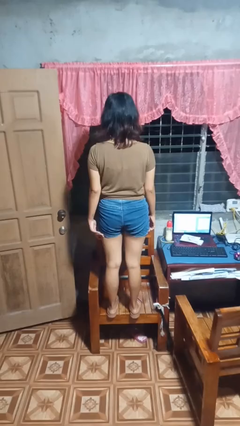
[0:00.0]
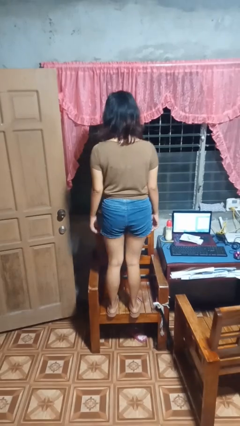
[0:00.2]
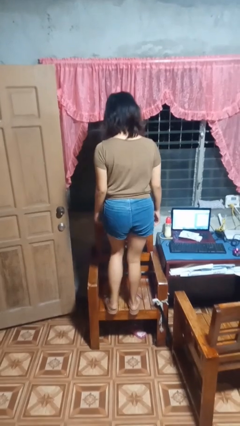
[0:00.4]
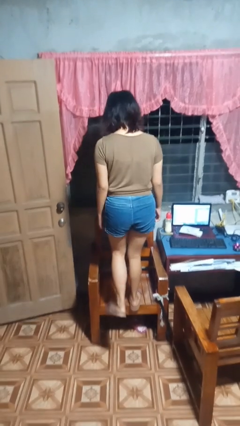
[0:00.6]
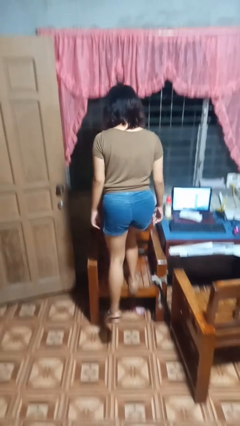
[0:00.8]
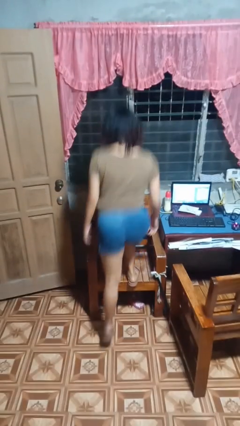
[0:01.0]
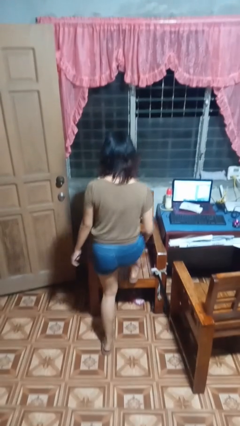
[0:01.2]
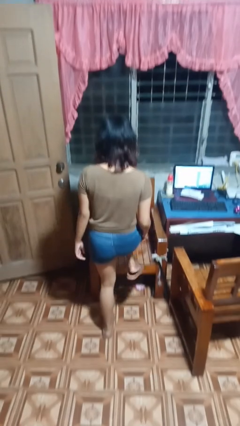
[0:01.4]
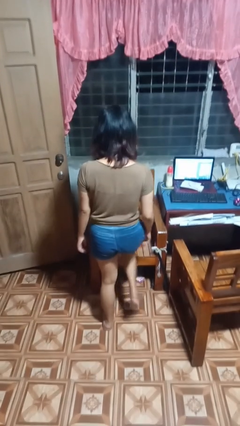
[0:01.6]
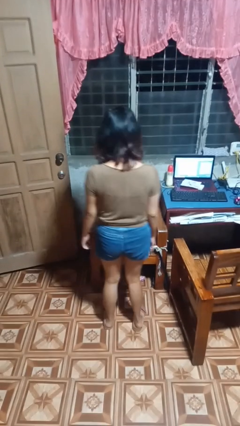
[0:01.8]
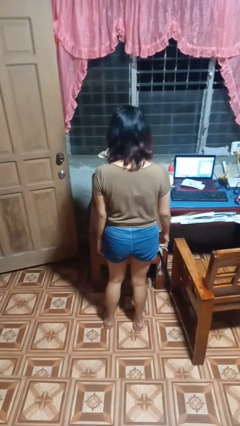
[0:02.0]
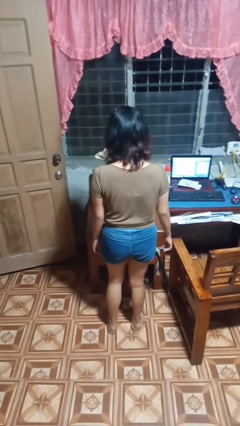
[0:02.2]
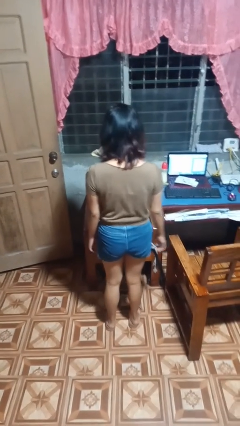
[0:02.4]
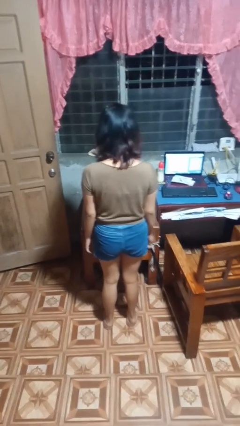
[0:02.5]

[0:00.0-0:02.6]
person climbs off chair

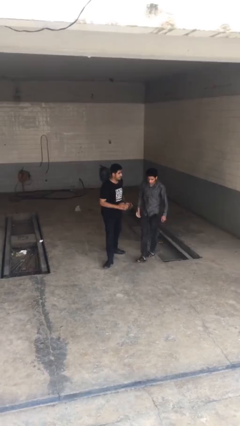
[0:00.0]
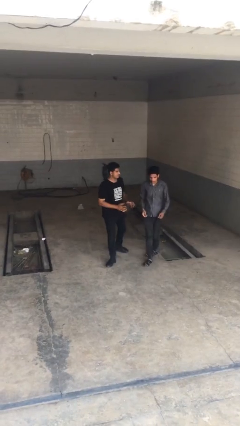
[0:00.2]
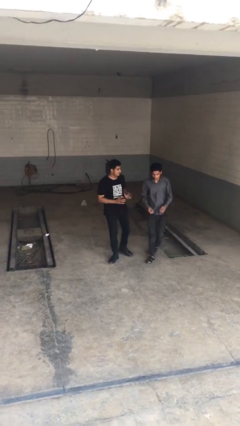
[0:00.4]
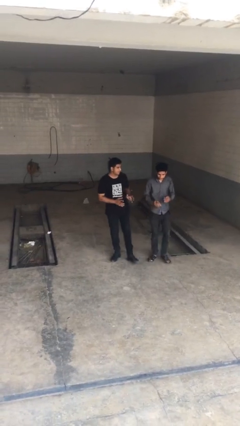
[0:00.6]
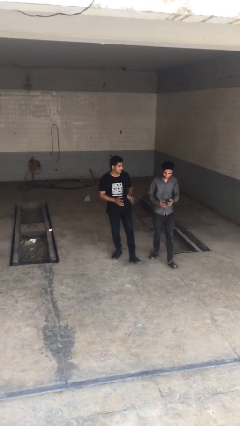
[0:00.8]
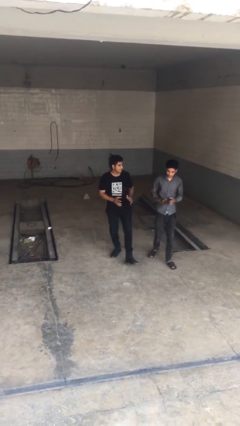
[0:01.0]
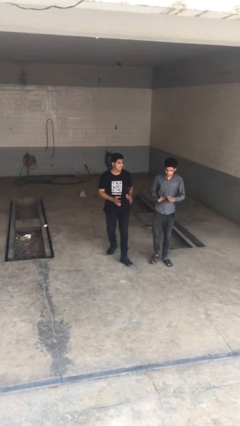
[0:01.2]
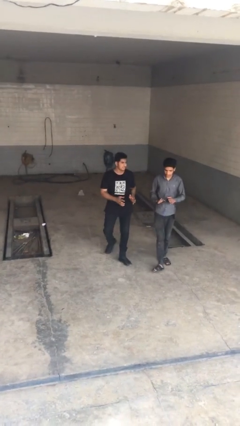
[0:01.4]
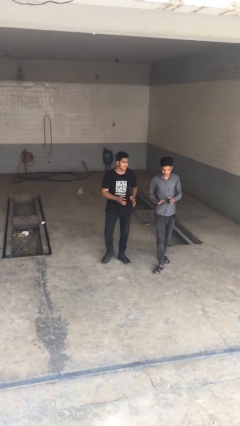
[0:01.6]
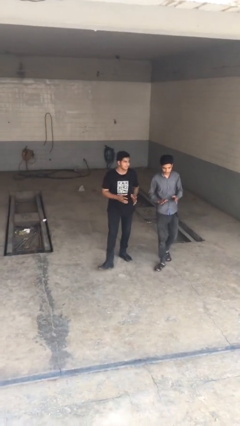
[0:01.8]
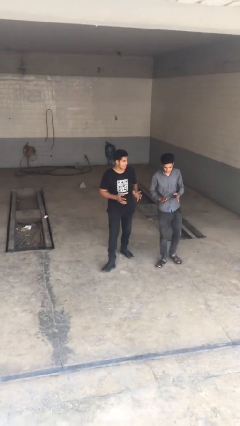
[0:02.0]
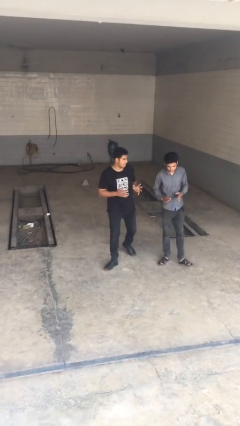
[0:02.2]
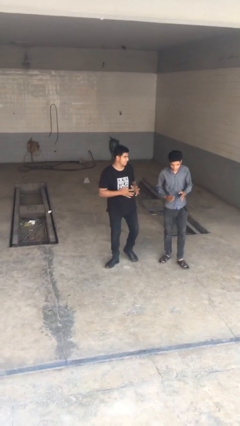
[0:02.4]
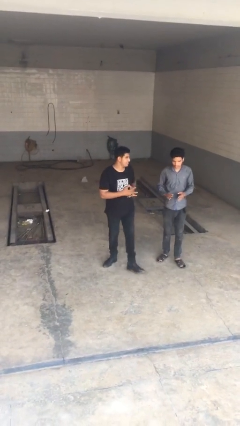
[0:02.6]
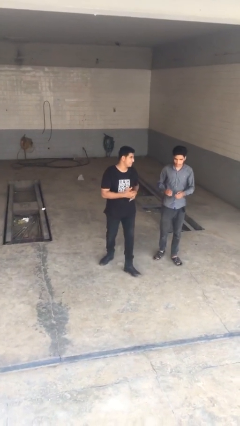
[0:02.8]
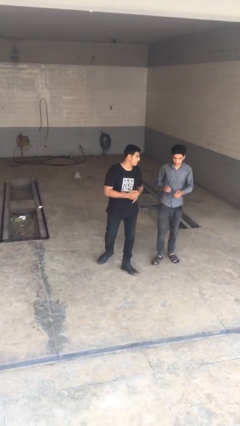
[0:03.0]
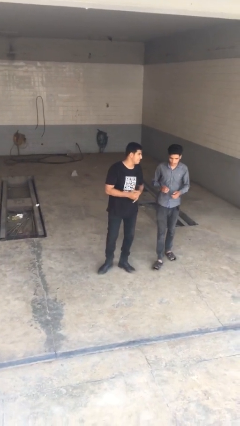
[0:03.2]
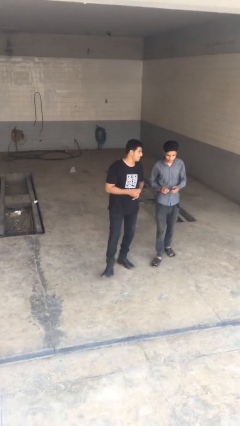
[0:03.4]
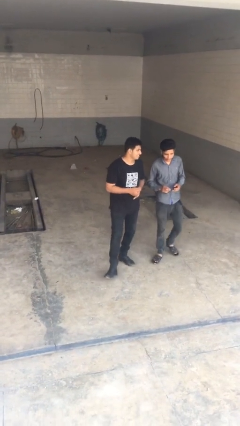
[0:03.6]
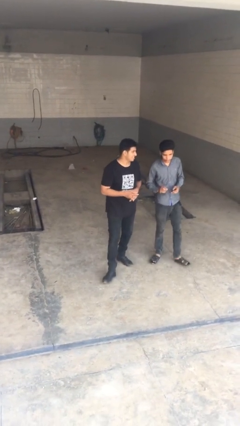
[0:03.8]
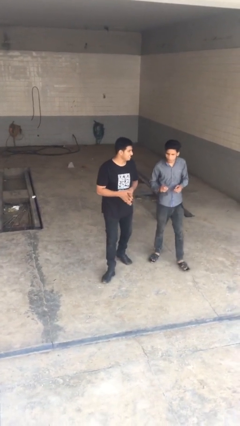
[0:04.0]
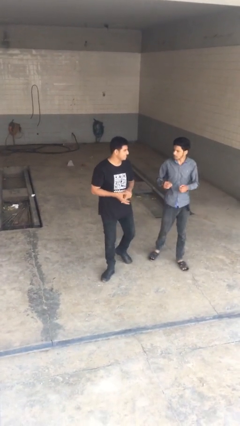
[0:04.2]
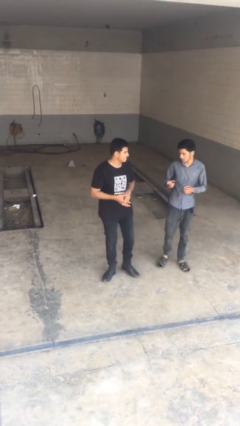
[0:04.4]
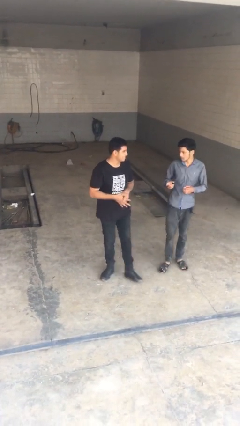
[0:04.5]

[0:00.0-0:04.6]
person talks to person

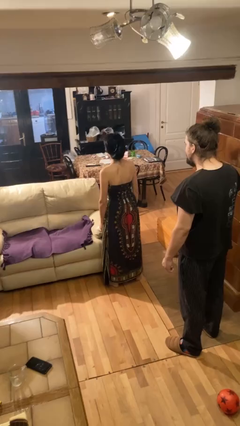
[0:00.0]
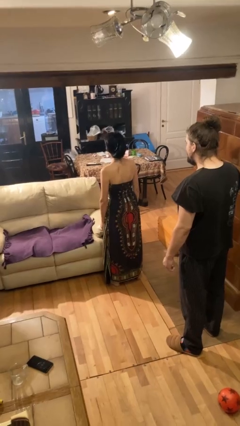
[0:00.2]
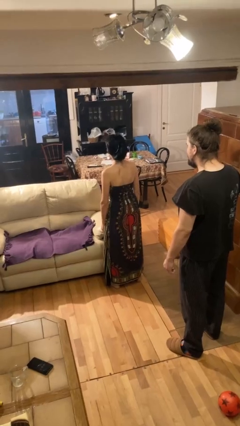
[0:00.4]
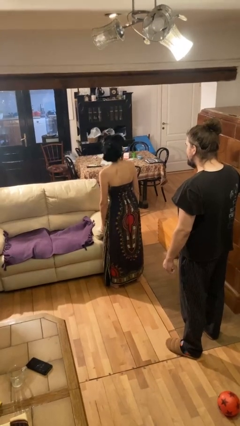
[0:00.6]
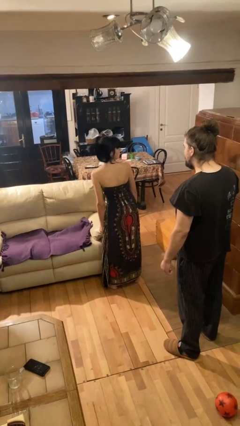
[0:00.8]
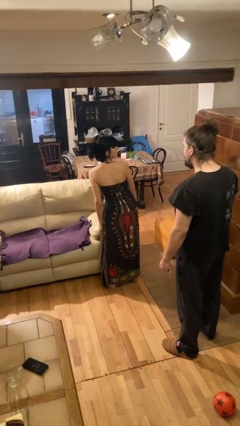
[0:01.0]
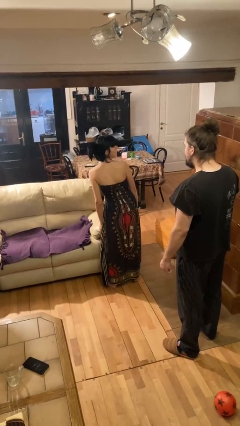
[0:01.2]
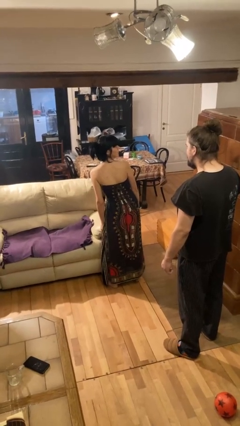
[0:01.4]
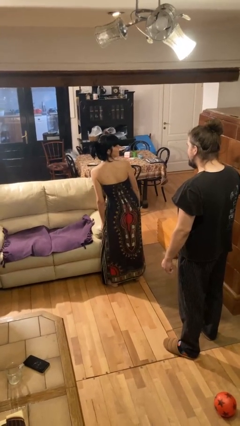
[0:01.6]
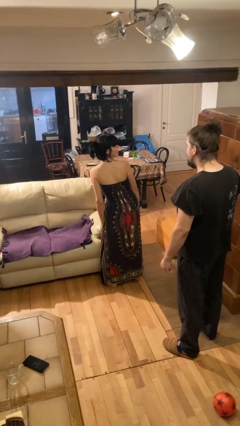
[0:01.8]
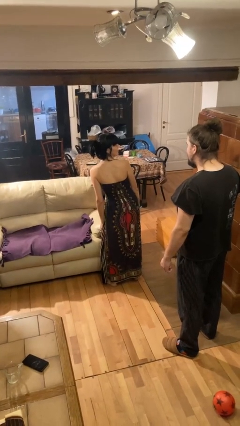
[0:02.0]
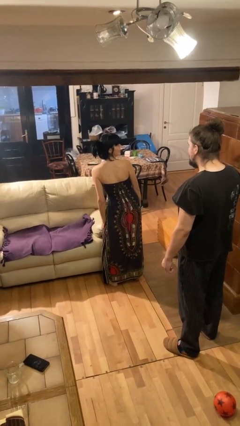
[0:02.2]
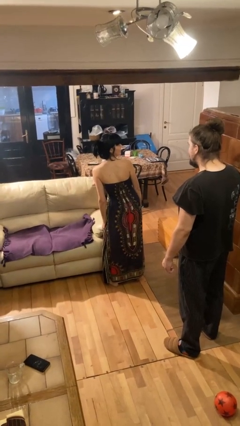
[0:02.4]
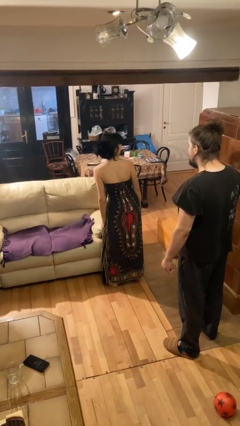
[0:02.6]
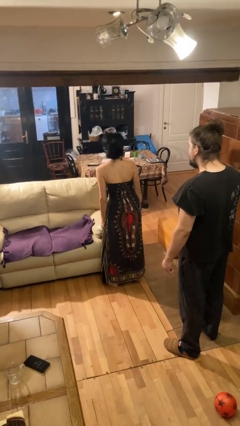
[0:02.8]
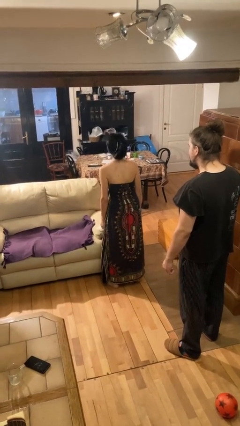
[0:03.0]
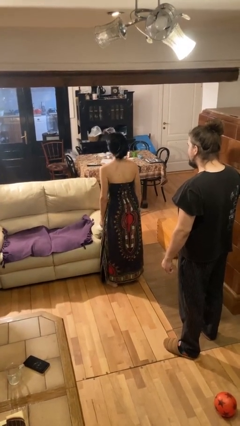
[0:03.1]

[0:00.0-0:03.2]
person looks over shoulder

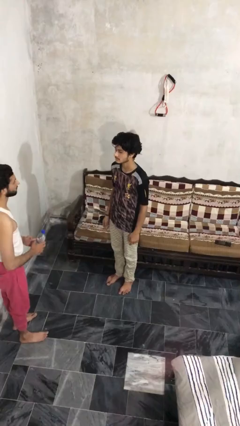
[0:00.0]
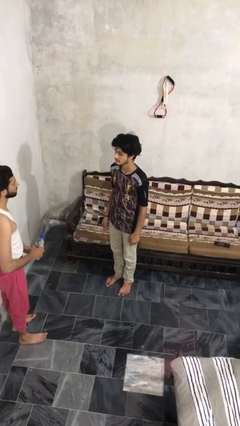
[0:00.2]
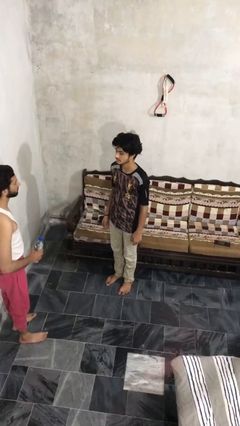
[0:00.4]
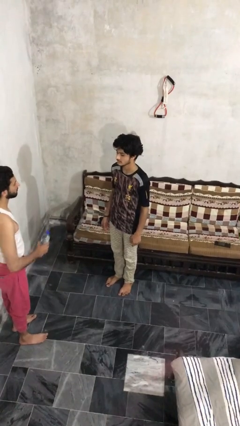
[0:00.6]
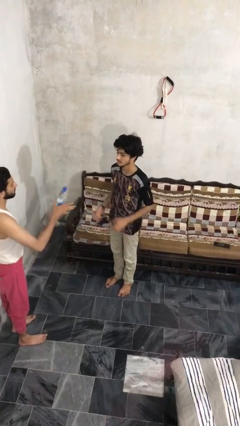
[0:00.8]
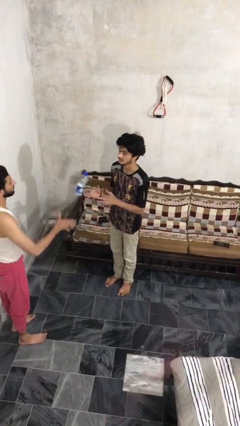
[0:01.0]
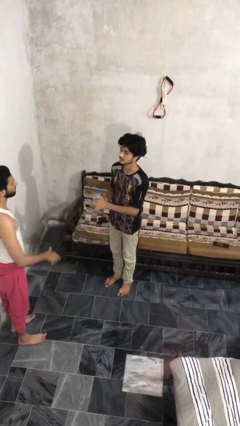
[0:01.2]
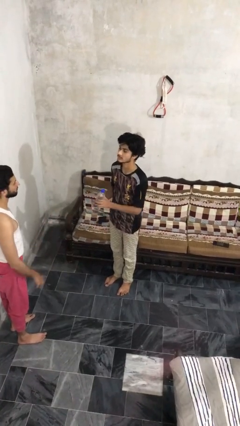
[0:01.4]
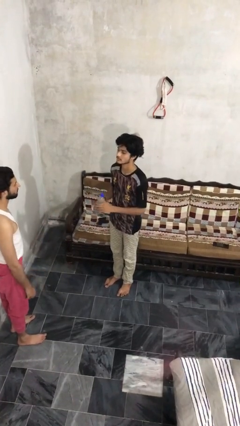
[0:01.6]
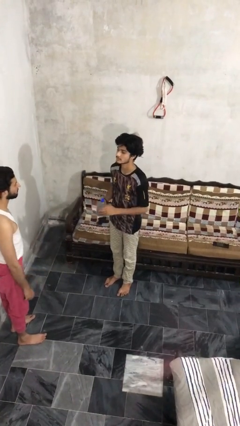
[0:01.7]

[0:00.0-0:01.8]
person catches object from person

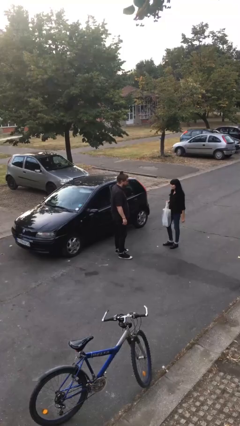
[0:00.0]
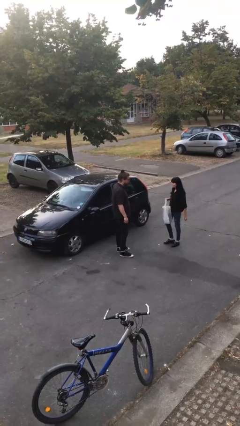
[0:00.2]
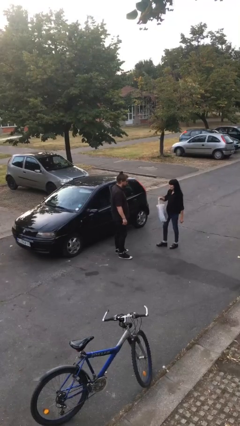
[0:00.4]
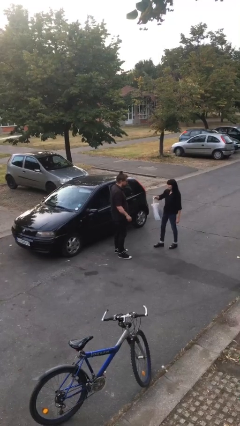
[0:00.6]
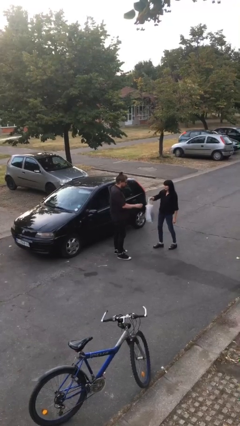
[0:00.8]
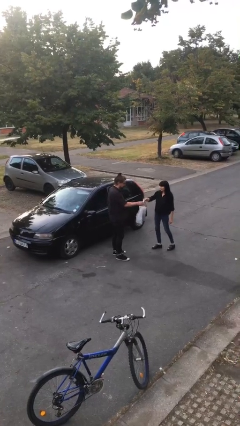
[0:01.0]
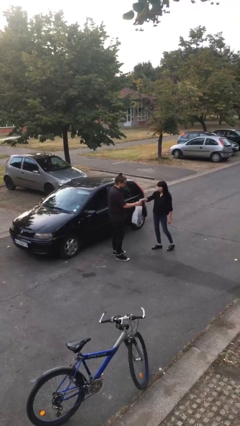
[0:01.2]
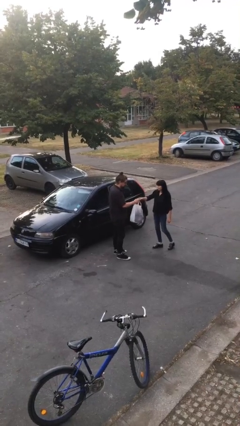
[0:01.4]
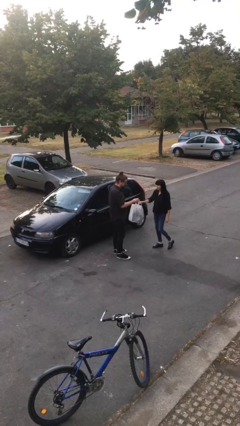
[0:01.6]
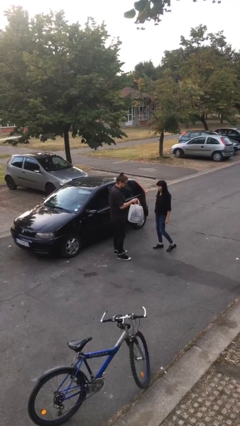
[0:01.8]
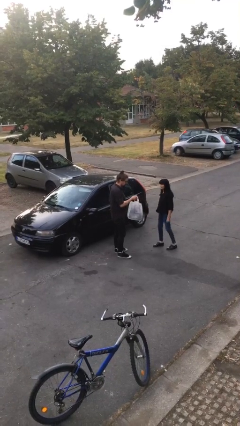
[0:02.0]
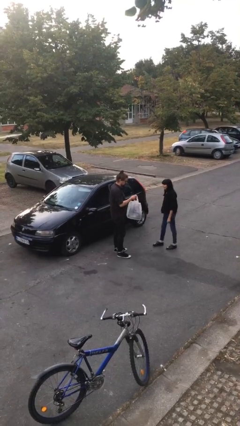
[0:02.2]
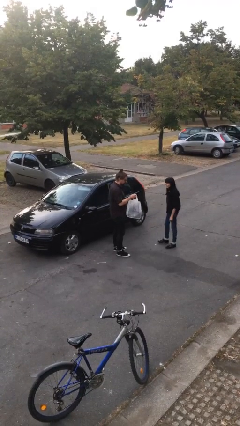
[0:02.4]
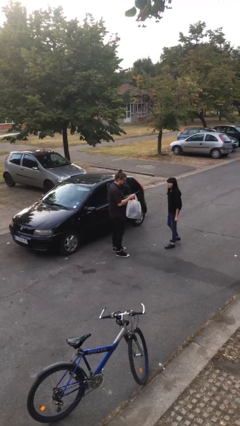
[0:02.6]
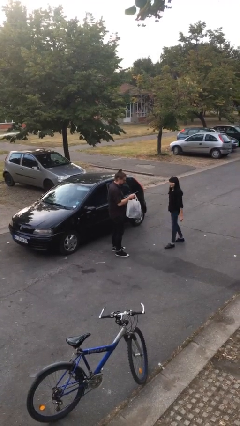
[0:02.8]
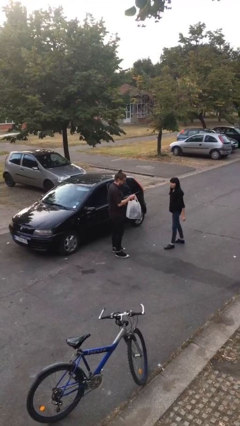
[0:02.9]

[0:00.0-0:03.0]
person transfers object to person

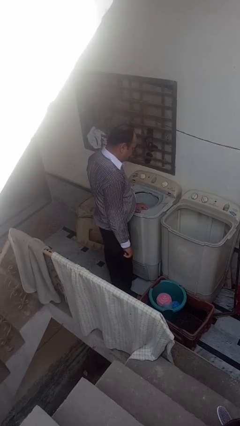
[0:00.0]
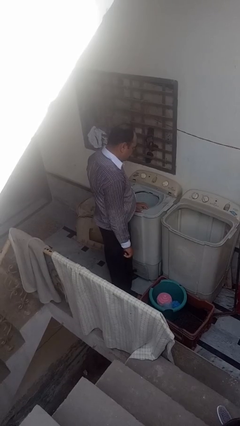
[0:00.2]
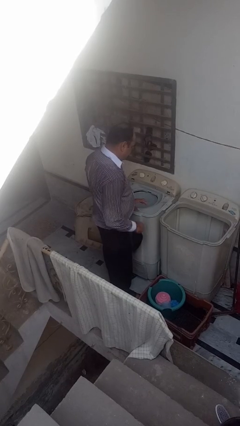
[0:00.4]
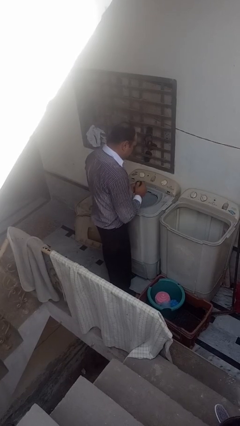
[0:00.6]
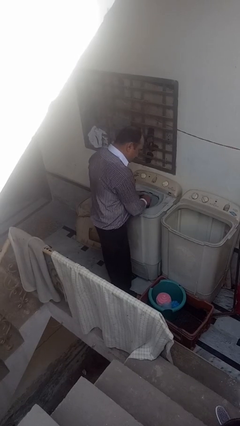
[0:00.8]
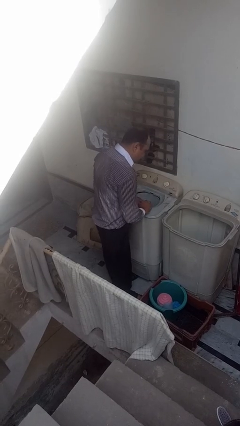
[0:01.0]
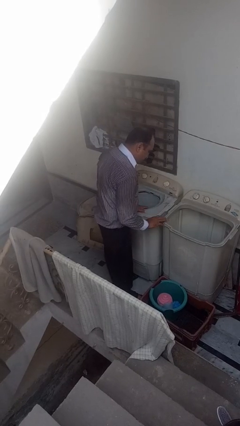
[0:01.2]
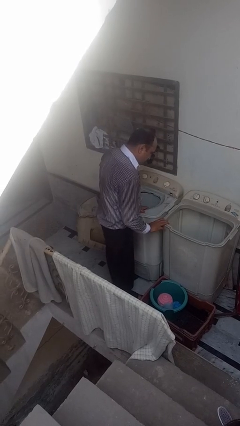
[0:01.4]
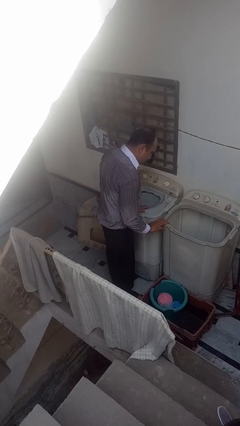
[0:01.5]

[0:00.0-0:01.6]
person loads dryer

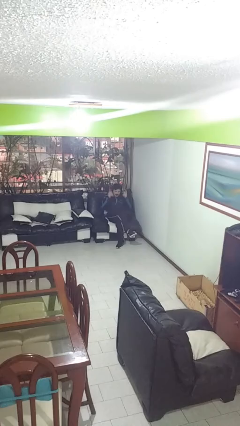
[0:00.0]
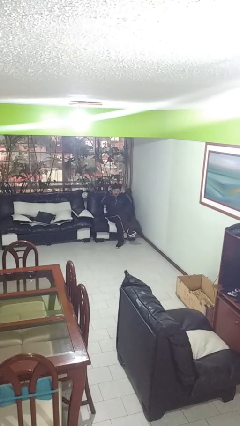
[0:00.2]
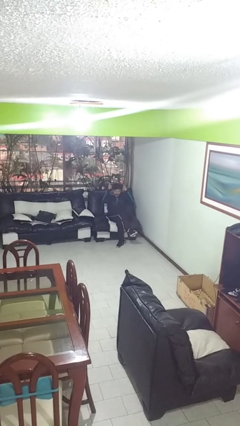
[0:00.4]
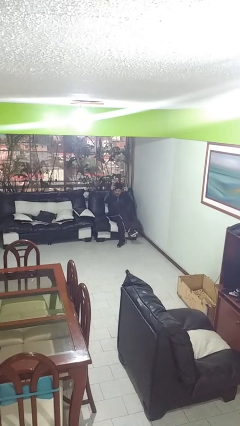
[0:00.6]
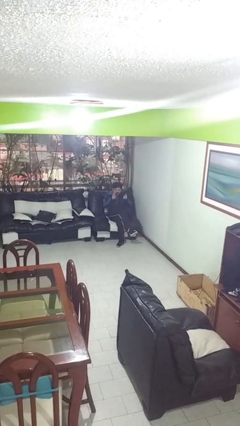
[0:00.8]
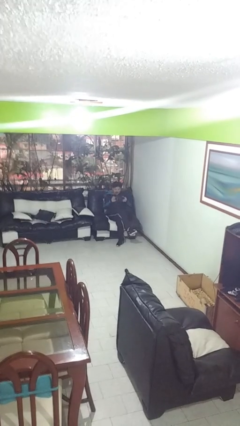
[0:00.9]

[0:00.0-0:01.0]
person takes off headphones
